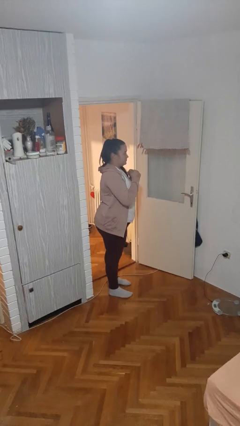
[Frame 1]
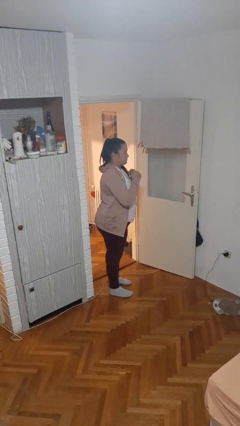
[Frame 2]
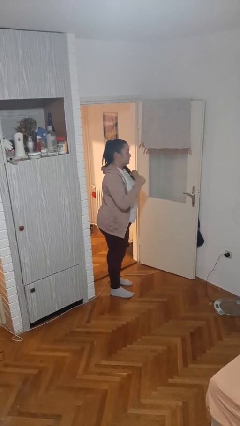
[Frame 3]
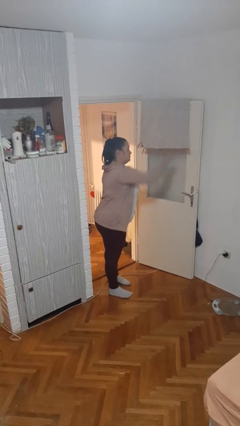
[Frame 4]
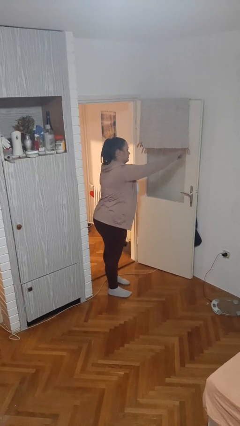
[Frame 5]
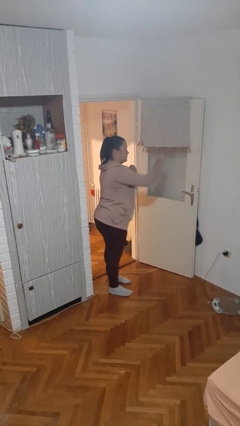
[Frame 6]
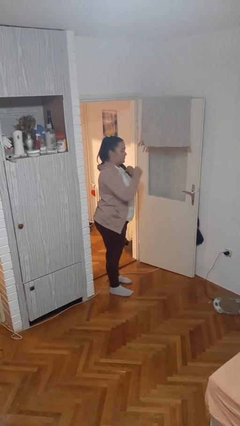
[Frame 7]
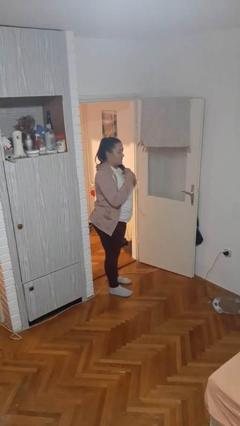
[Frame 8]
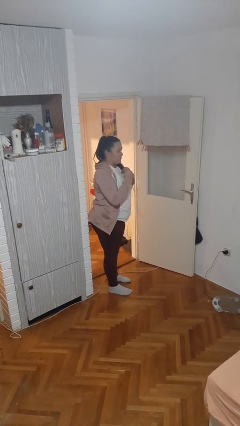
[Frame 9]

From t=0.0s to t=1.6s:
person punches

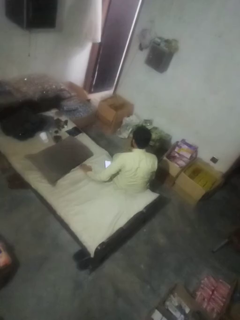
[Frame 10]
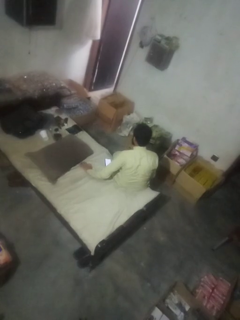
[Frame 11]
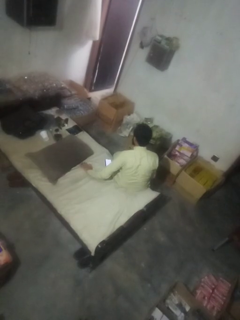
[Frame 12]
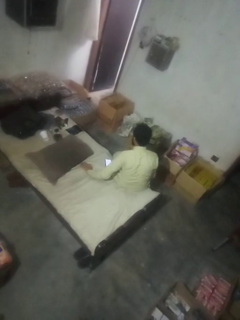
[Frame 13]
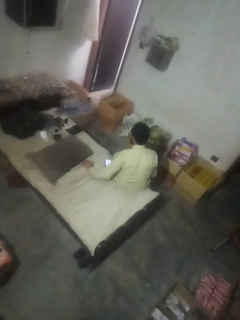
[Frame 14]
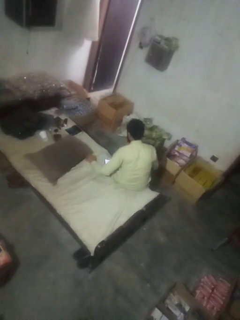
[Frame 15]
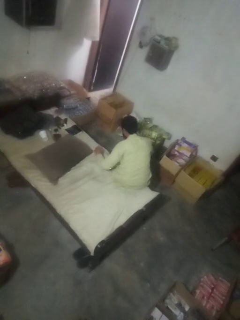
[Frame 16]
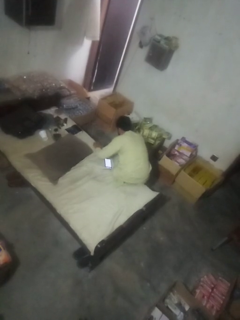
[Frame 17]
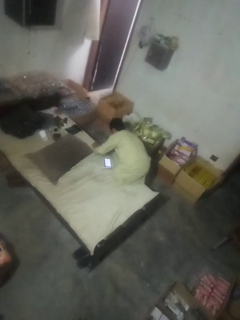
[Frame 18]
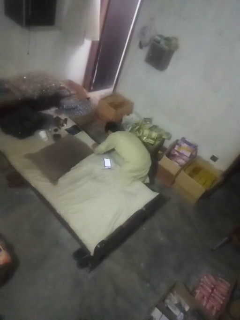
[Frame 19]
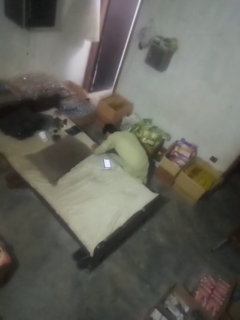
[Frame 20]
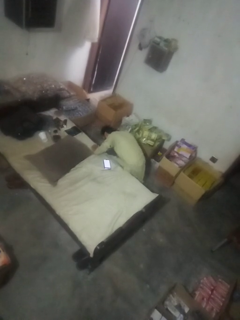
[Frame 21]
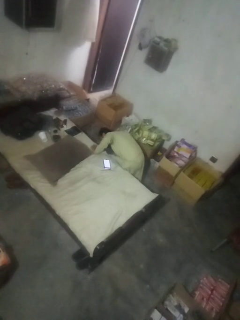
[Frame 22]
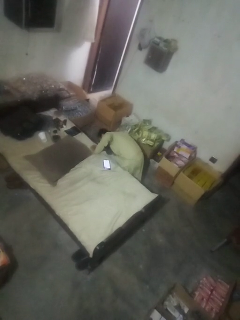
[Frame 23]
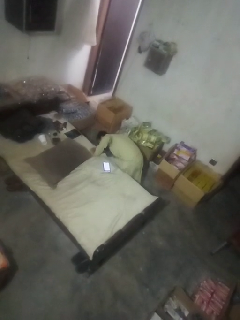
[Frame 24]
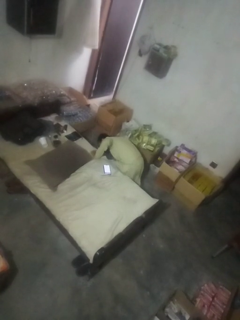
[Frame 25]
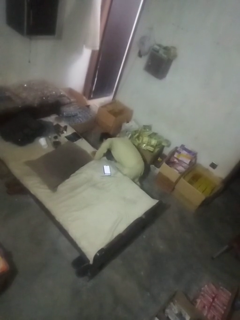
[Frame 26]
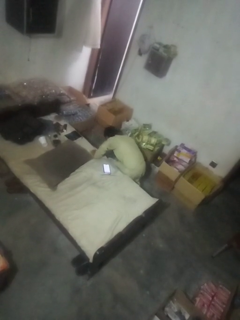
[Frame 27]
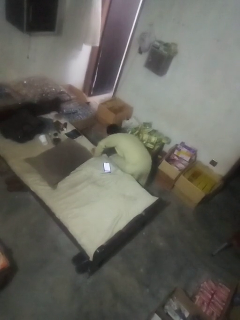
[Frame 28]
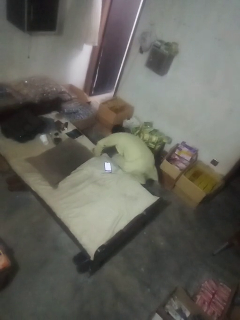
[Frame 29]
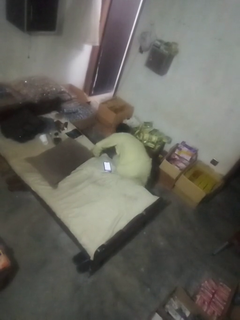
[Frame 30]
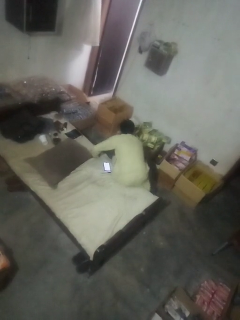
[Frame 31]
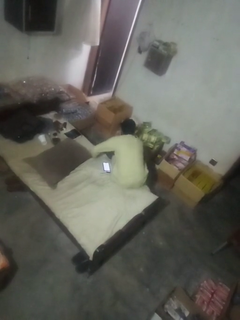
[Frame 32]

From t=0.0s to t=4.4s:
person searches under couch

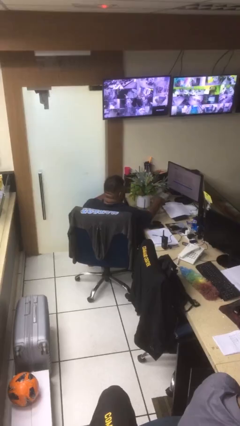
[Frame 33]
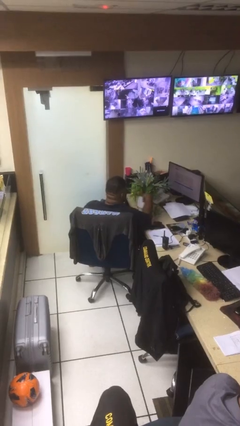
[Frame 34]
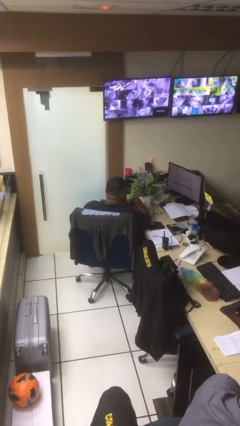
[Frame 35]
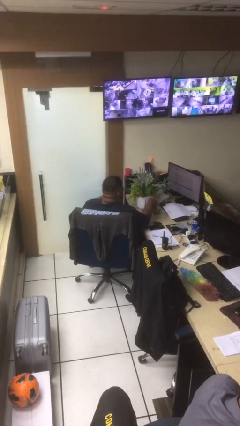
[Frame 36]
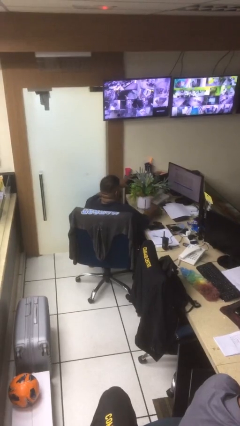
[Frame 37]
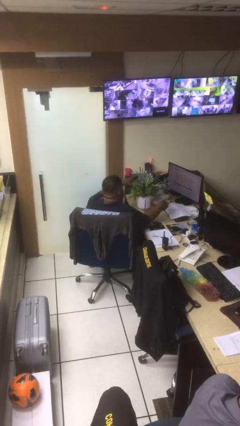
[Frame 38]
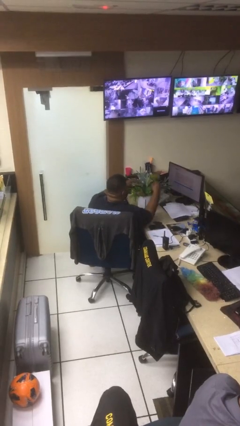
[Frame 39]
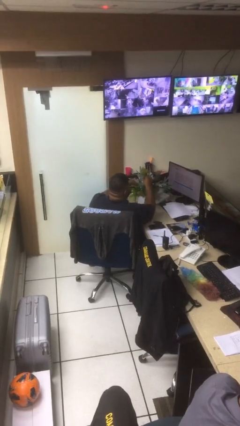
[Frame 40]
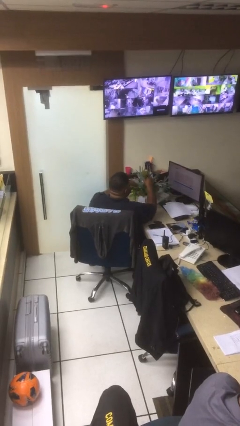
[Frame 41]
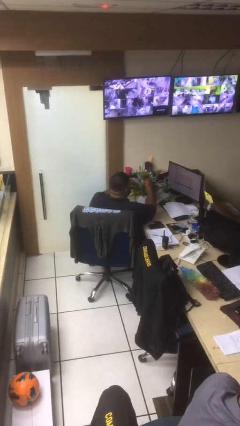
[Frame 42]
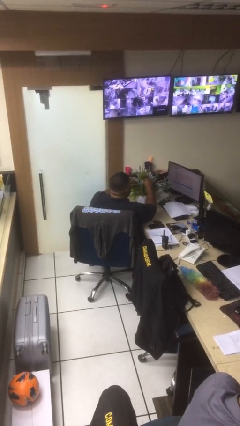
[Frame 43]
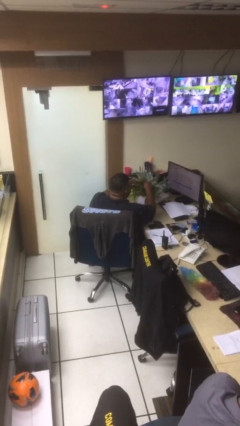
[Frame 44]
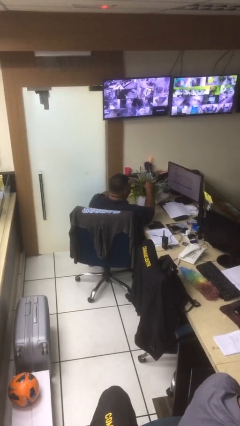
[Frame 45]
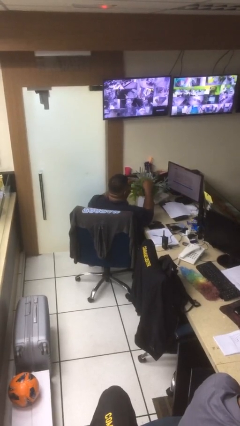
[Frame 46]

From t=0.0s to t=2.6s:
person arranges flowers in vase

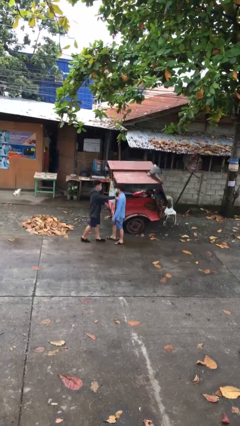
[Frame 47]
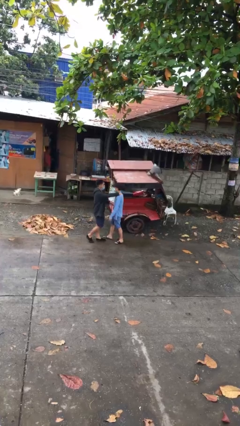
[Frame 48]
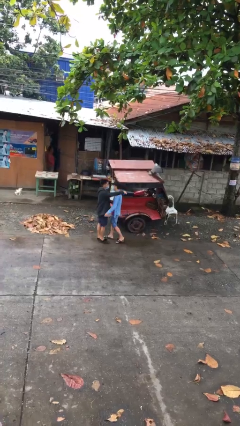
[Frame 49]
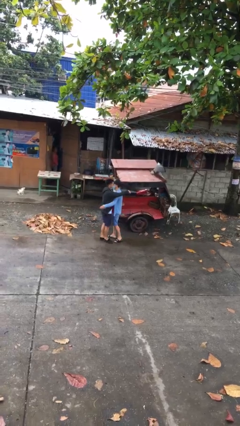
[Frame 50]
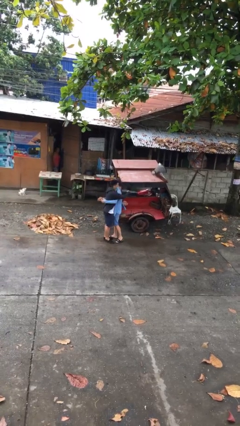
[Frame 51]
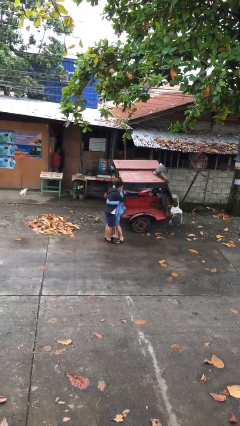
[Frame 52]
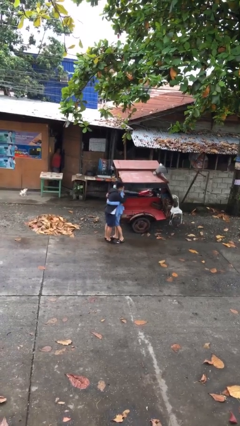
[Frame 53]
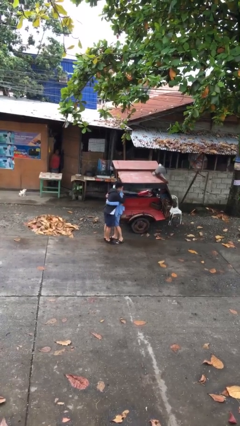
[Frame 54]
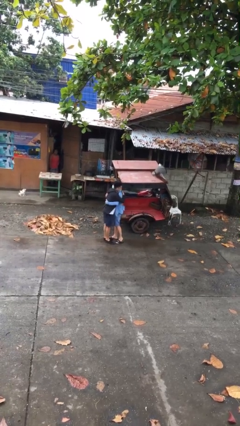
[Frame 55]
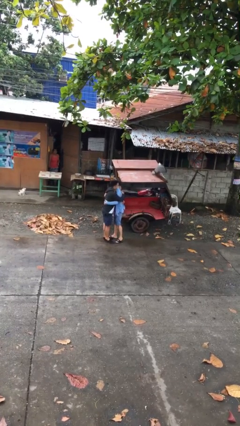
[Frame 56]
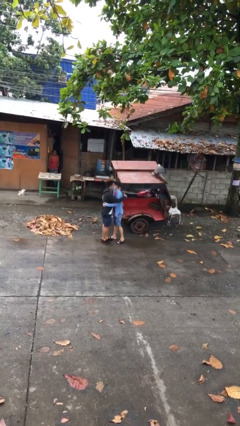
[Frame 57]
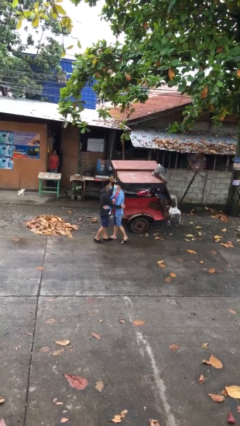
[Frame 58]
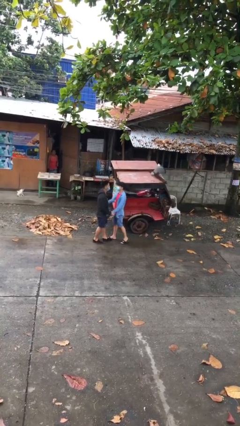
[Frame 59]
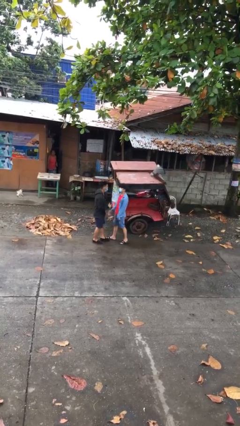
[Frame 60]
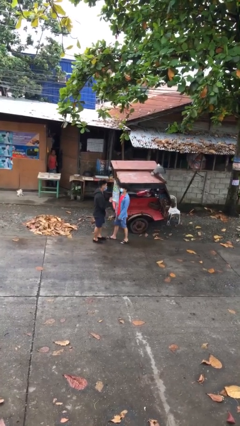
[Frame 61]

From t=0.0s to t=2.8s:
person embraces person

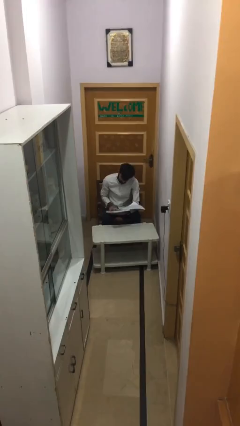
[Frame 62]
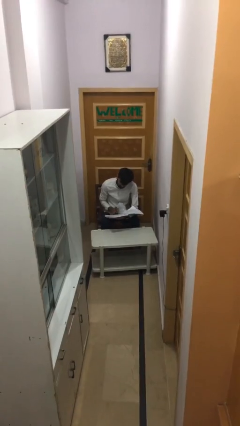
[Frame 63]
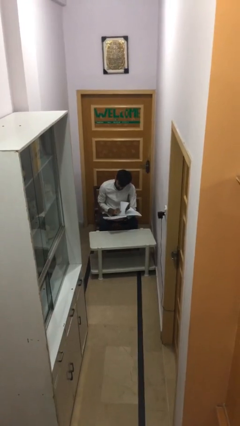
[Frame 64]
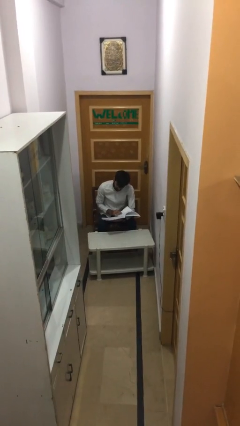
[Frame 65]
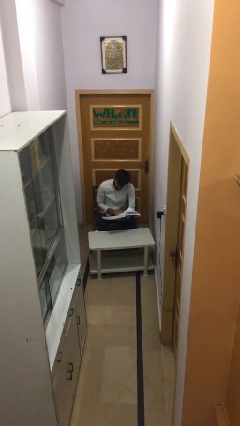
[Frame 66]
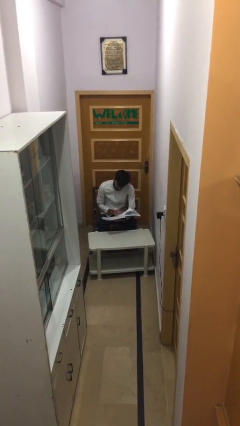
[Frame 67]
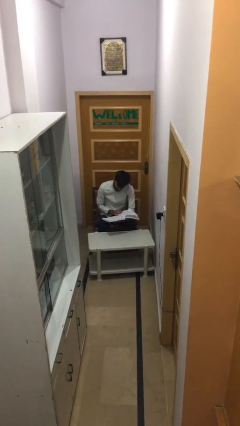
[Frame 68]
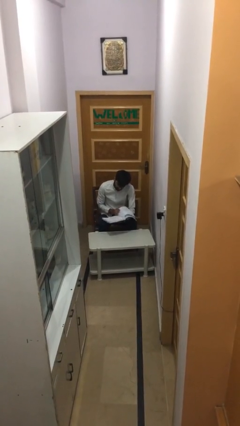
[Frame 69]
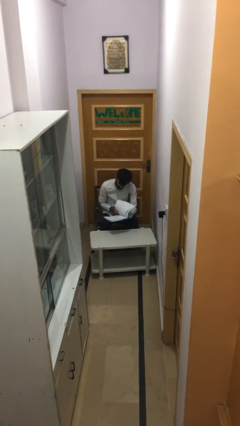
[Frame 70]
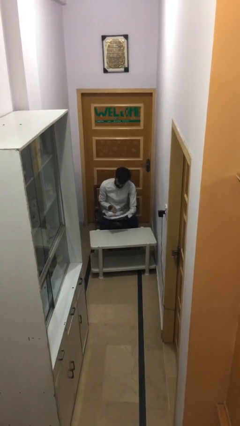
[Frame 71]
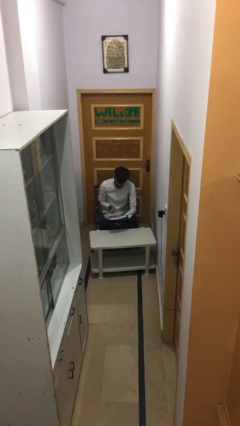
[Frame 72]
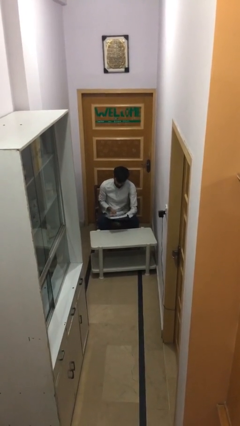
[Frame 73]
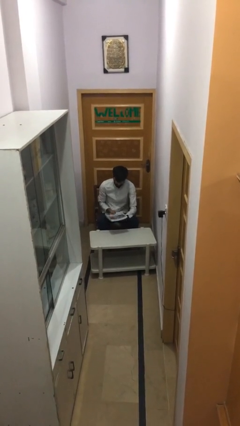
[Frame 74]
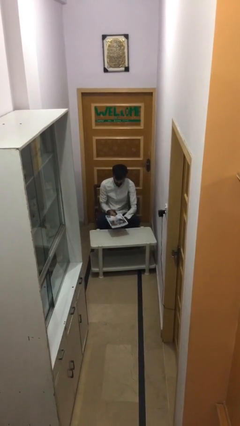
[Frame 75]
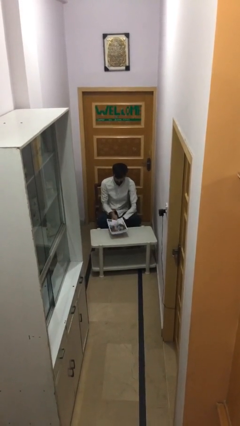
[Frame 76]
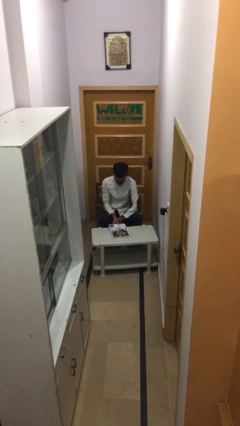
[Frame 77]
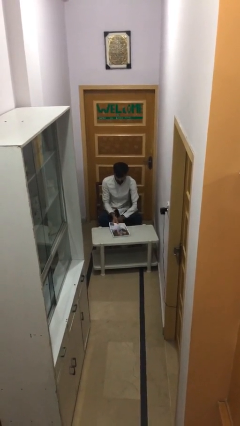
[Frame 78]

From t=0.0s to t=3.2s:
person puts down object on table

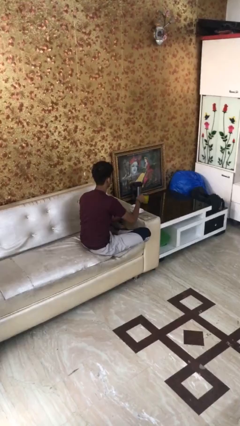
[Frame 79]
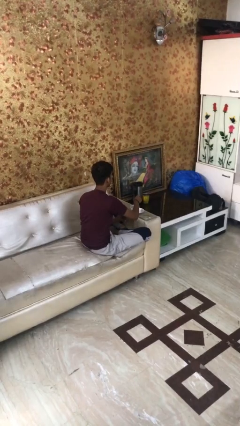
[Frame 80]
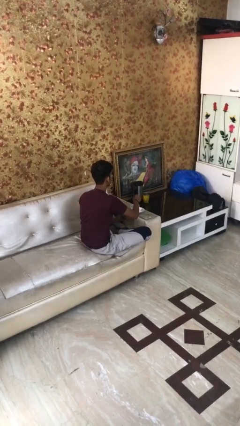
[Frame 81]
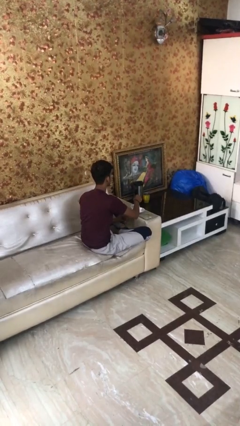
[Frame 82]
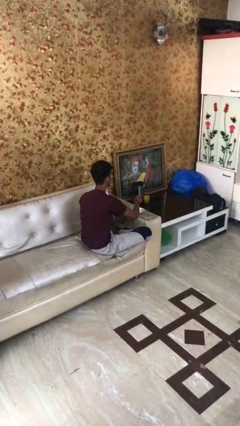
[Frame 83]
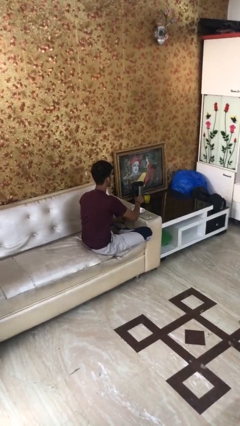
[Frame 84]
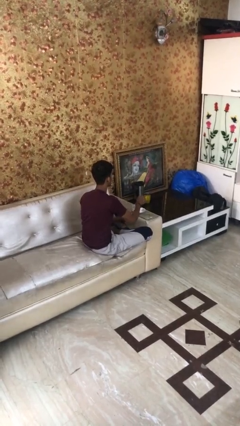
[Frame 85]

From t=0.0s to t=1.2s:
person stirs mug

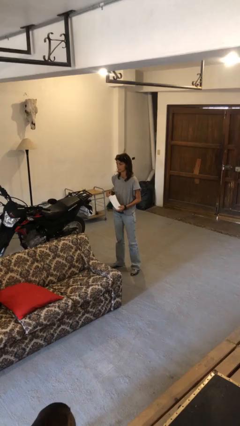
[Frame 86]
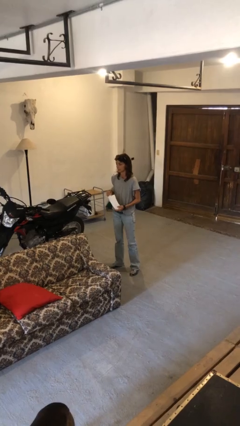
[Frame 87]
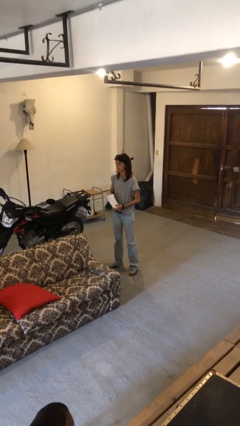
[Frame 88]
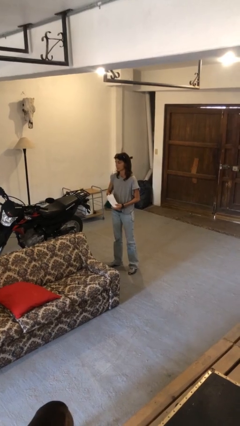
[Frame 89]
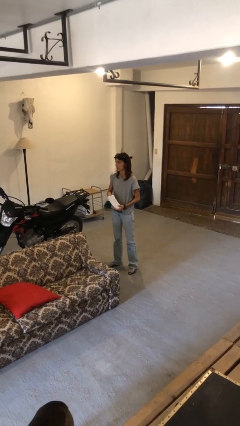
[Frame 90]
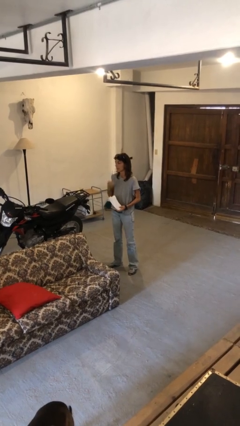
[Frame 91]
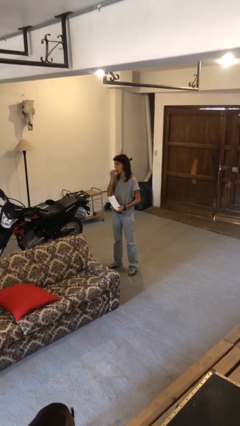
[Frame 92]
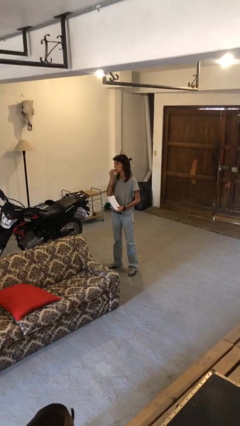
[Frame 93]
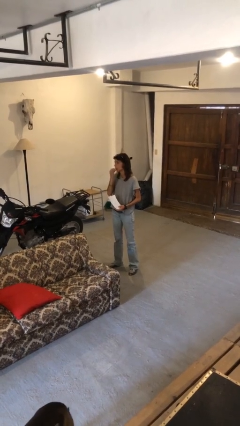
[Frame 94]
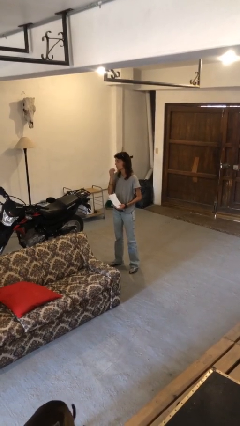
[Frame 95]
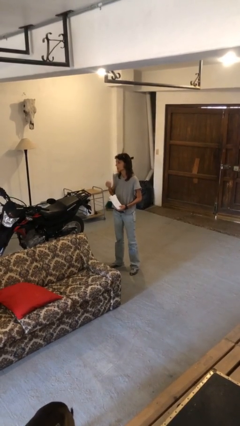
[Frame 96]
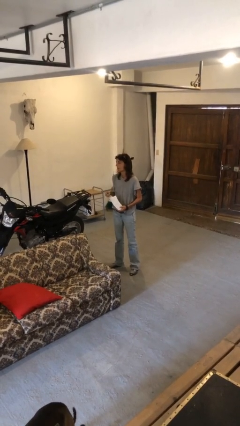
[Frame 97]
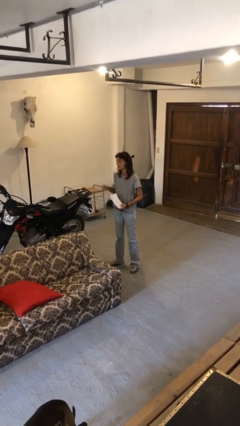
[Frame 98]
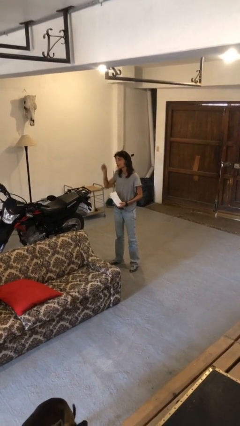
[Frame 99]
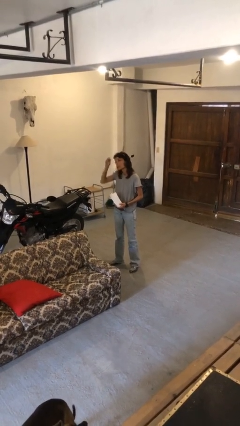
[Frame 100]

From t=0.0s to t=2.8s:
person eats snack from bag
